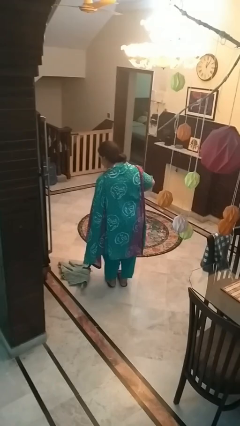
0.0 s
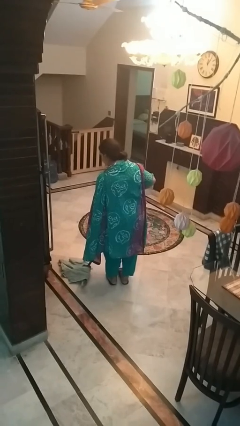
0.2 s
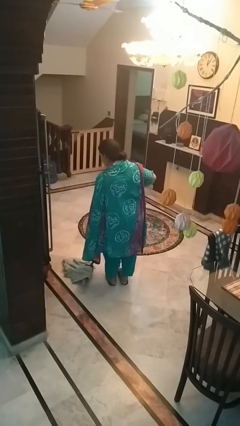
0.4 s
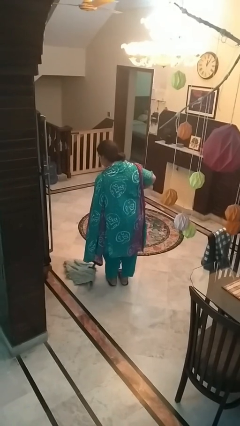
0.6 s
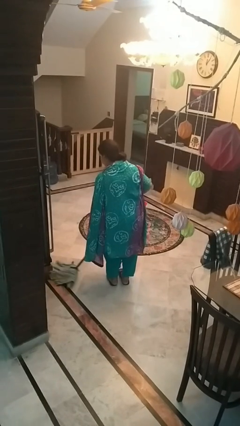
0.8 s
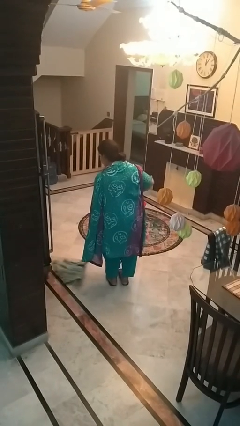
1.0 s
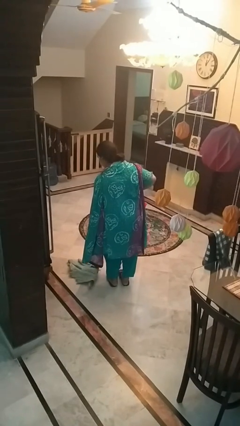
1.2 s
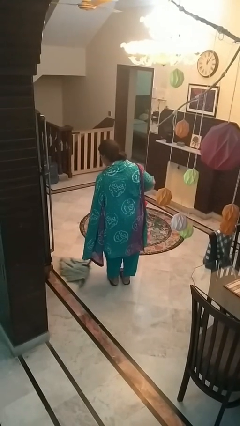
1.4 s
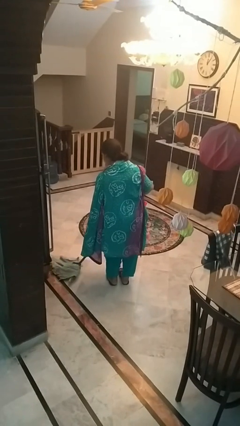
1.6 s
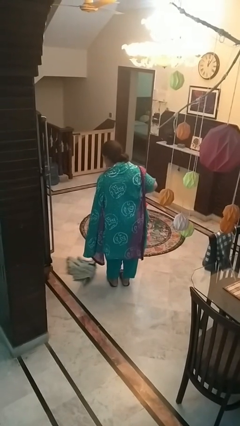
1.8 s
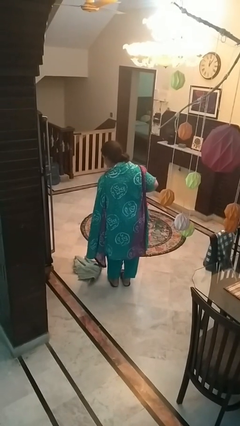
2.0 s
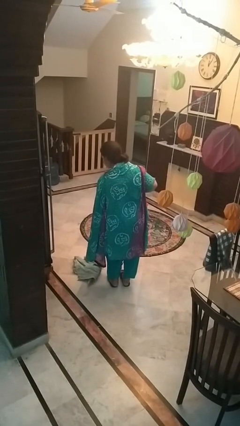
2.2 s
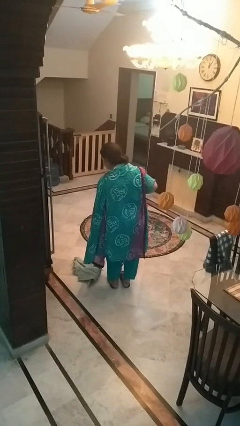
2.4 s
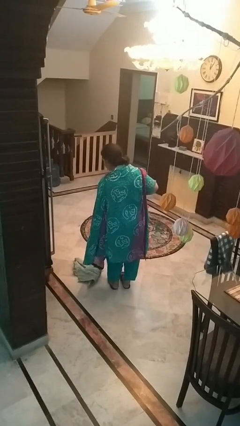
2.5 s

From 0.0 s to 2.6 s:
person mops

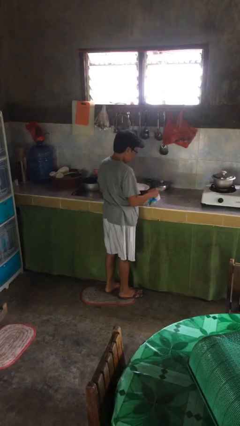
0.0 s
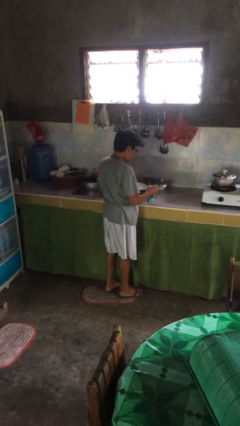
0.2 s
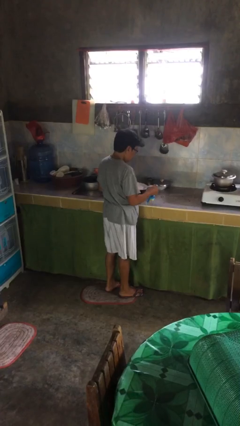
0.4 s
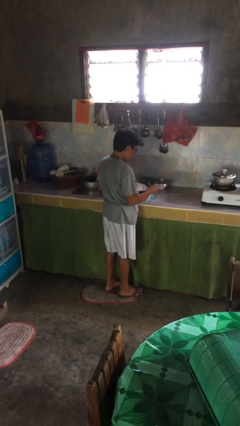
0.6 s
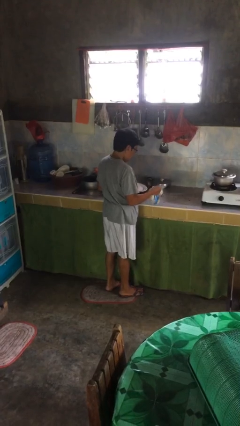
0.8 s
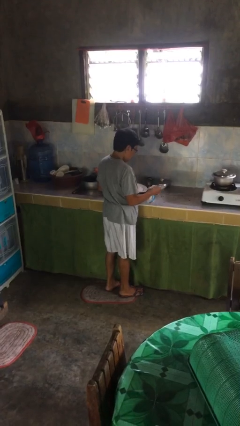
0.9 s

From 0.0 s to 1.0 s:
person dries dish

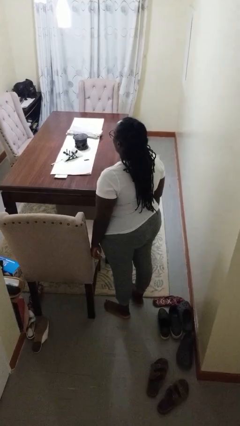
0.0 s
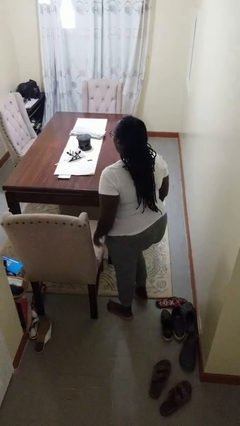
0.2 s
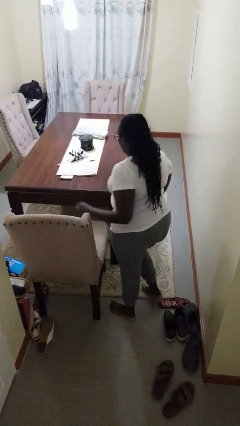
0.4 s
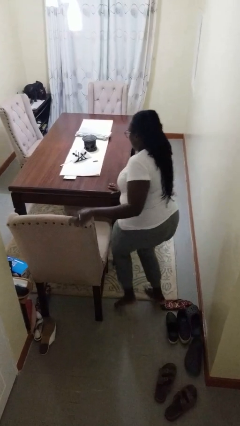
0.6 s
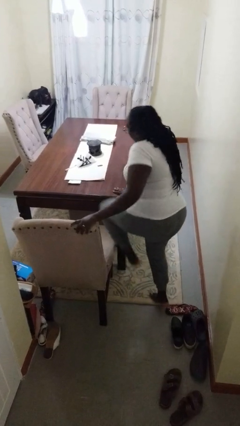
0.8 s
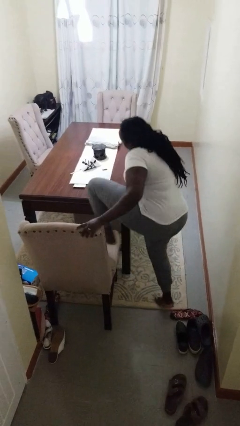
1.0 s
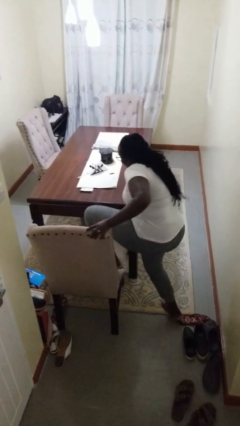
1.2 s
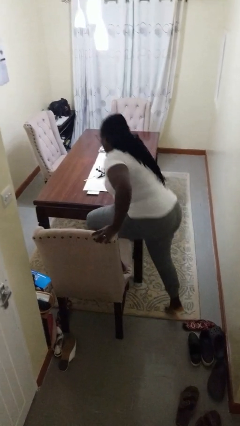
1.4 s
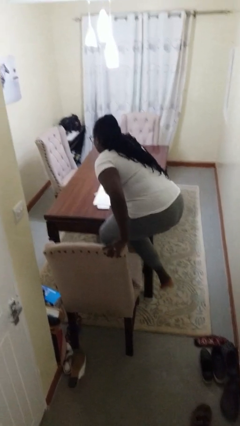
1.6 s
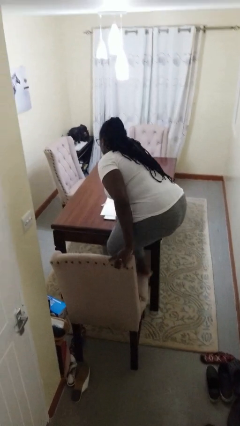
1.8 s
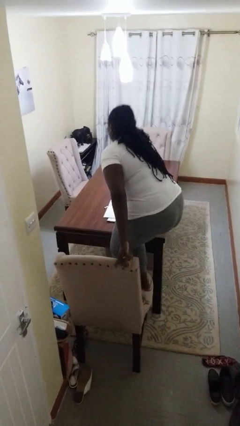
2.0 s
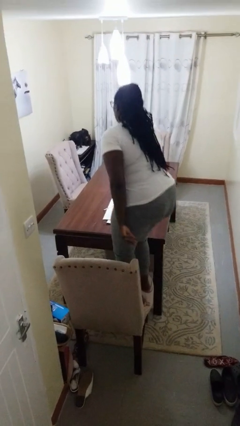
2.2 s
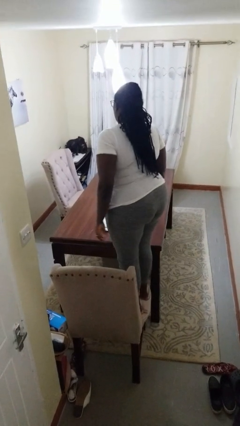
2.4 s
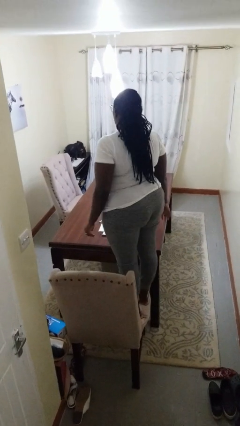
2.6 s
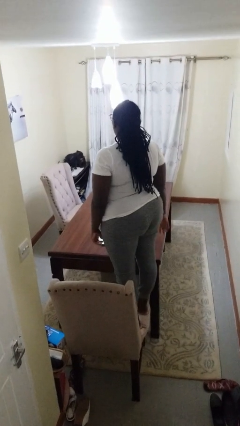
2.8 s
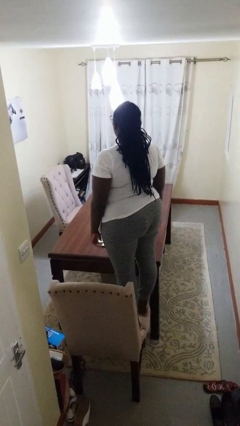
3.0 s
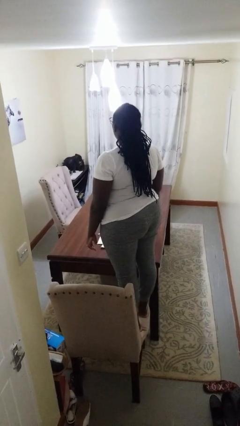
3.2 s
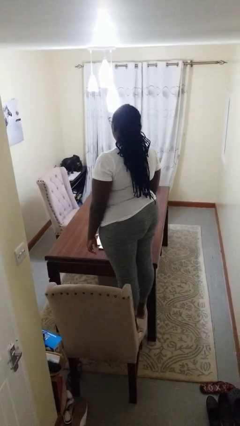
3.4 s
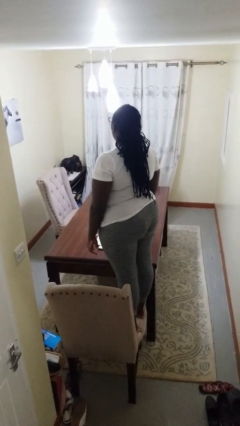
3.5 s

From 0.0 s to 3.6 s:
person climbs on chair

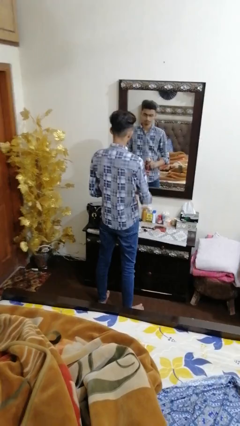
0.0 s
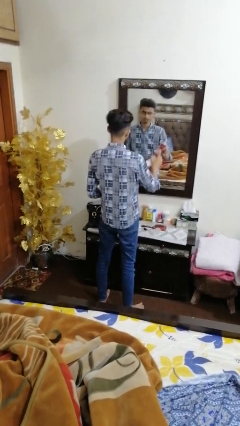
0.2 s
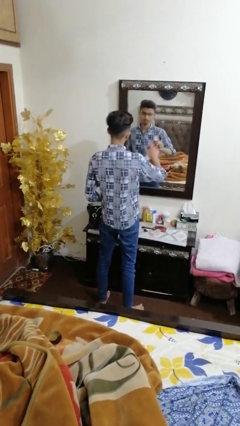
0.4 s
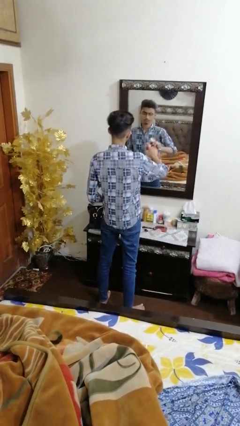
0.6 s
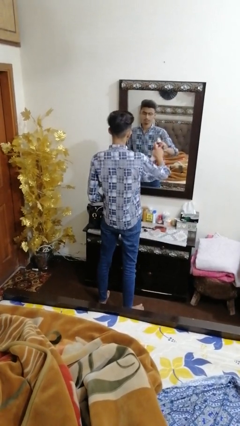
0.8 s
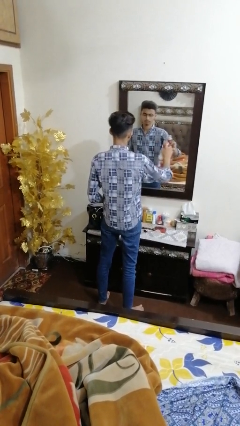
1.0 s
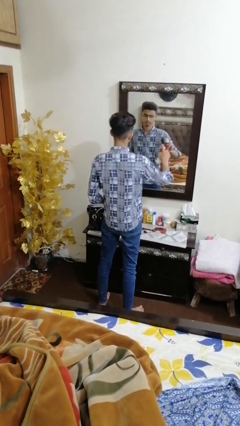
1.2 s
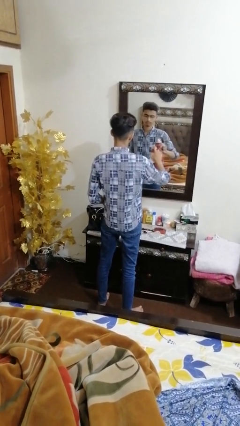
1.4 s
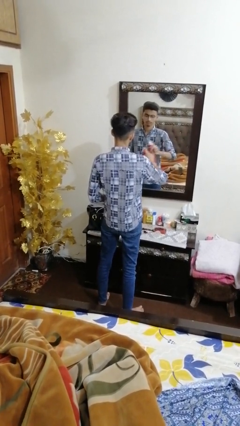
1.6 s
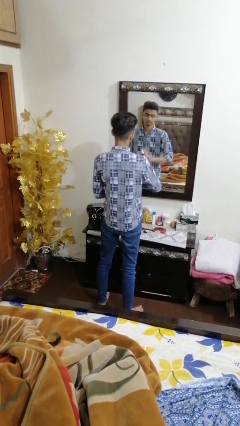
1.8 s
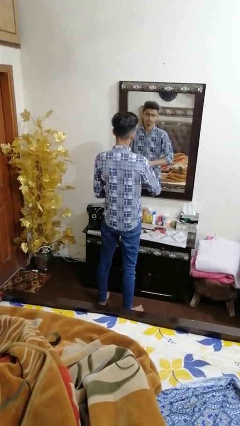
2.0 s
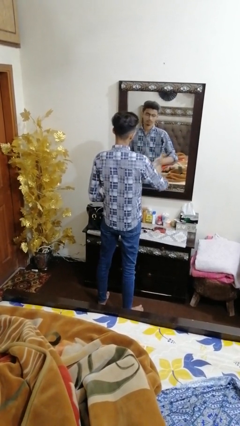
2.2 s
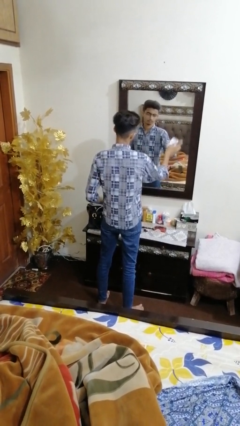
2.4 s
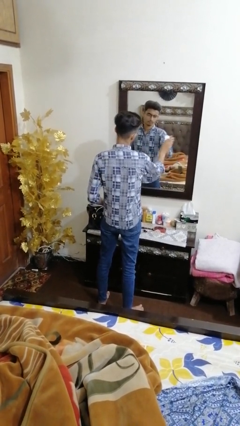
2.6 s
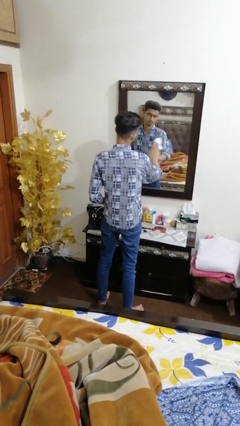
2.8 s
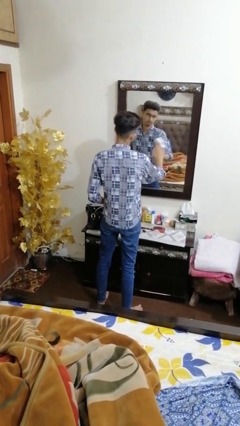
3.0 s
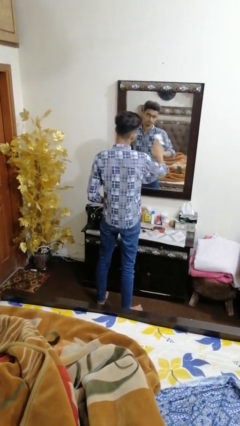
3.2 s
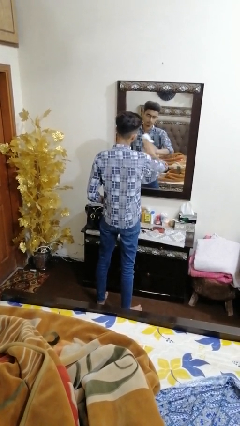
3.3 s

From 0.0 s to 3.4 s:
person sprays from bottle

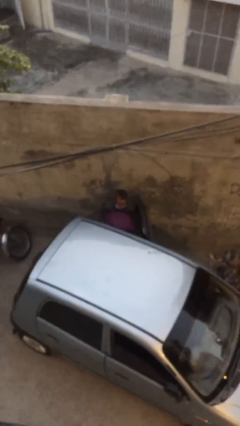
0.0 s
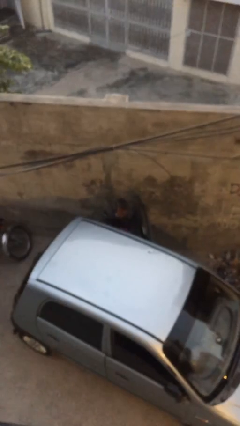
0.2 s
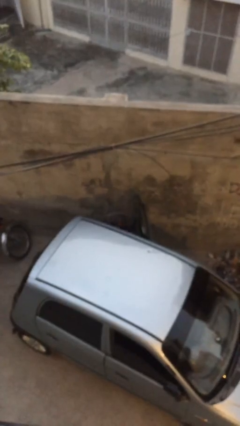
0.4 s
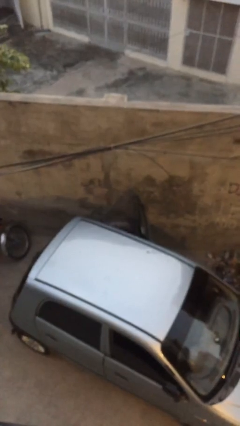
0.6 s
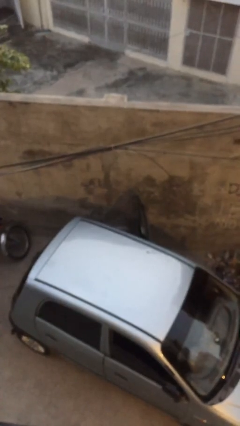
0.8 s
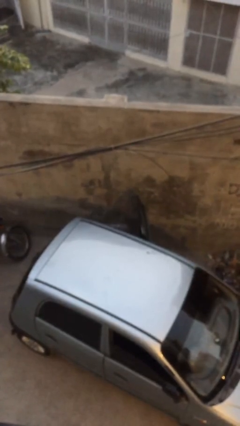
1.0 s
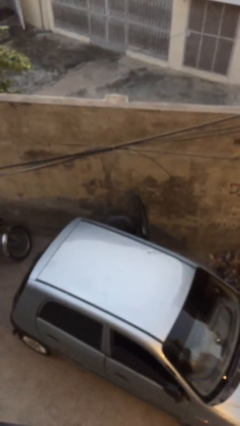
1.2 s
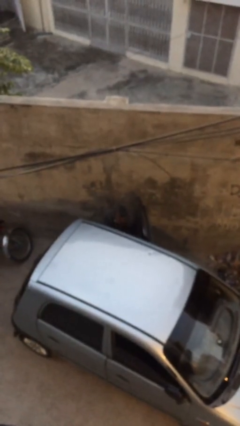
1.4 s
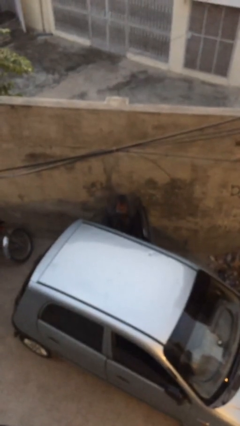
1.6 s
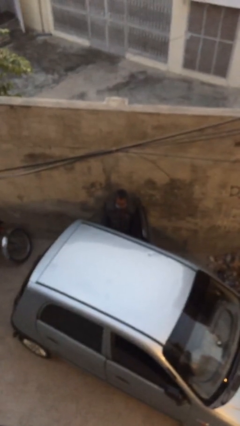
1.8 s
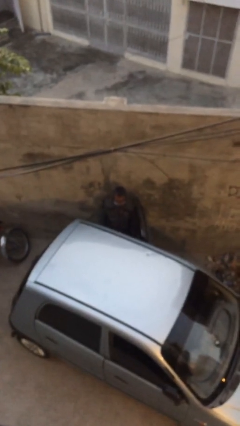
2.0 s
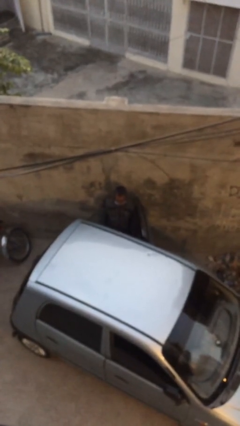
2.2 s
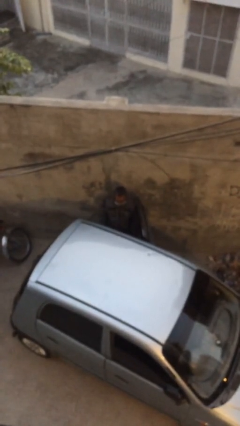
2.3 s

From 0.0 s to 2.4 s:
person loads car

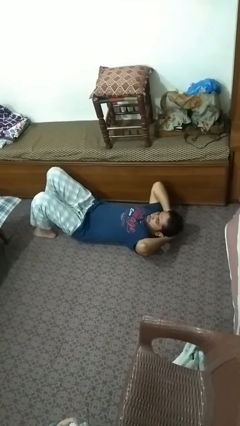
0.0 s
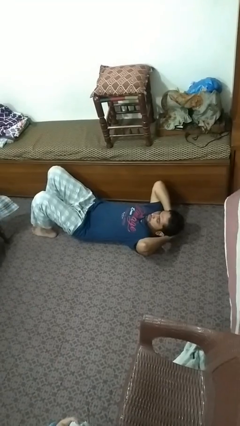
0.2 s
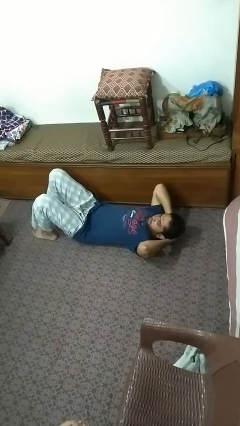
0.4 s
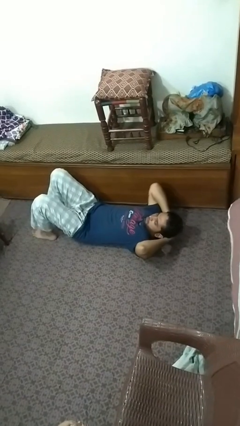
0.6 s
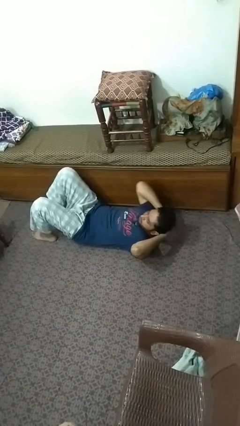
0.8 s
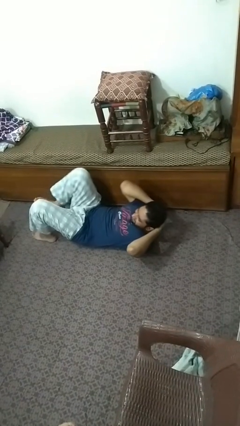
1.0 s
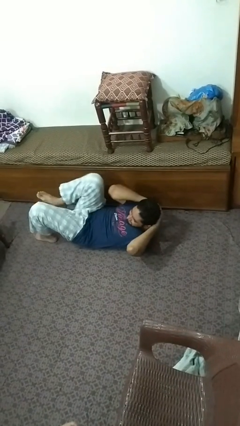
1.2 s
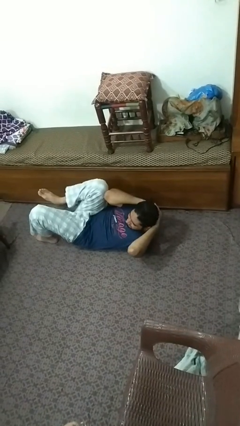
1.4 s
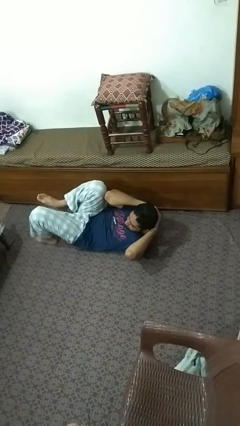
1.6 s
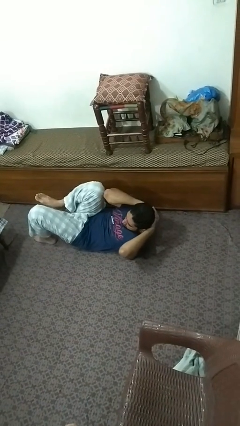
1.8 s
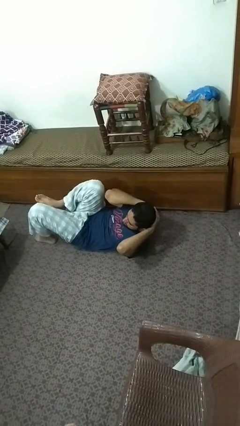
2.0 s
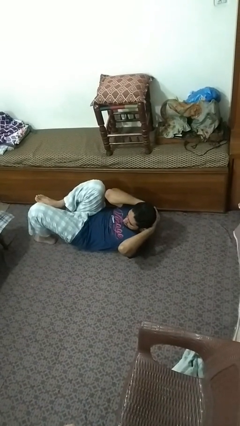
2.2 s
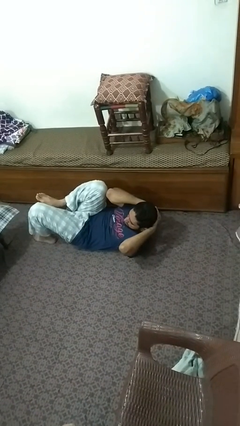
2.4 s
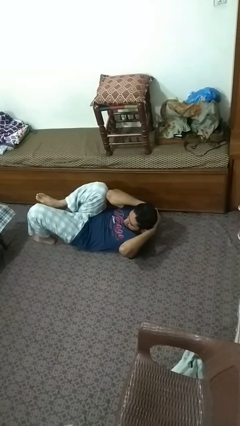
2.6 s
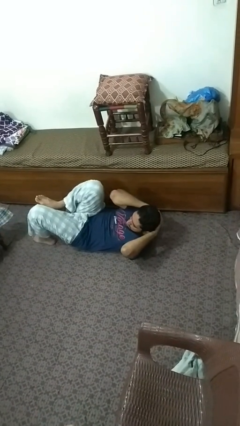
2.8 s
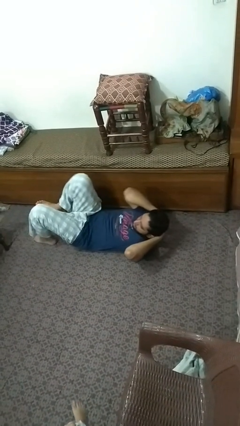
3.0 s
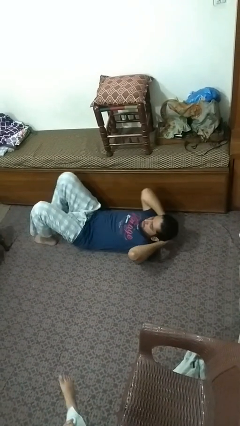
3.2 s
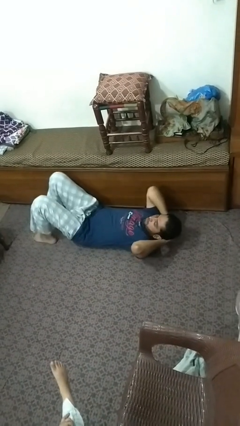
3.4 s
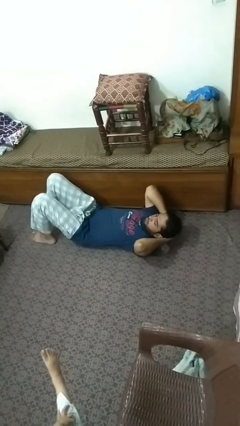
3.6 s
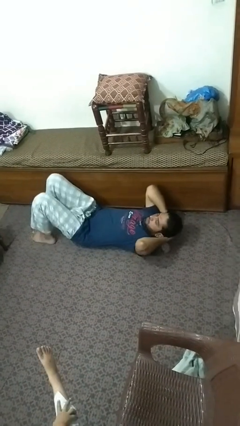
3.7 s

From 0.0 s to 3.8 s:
person exercises with situp

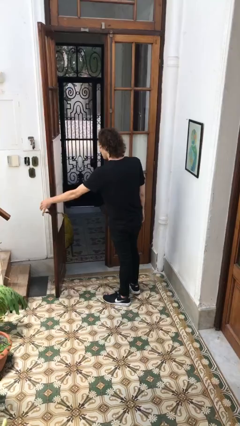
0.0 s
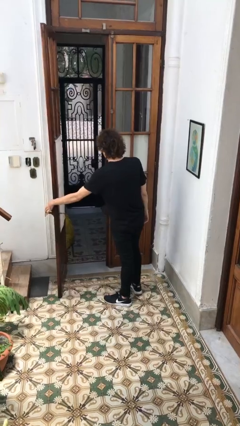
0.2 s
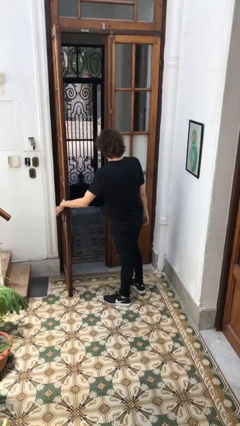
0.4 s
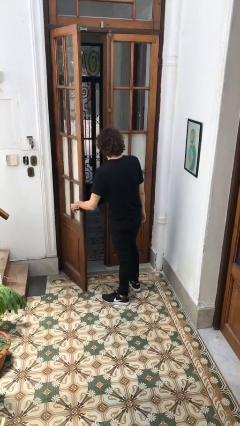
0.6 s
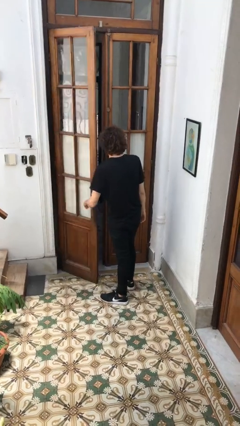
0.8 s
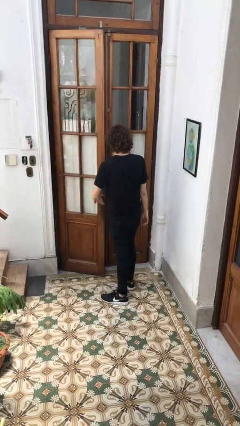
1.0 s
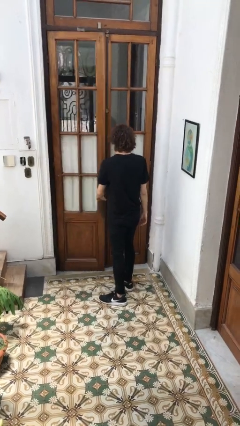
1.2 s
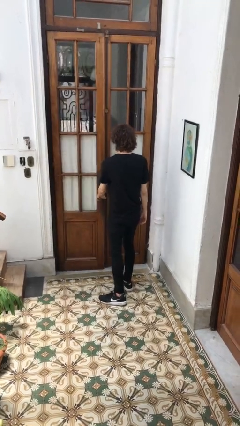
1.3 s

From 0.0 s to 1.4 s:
person closes facility door
